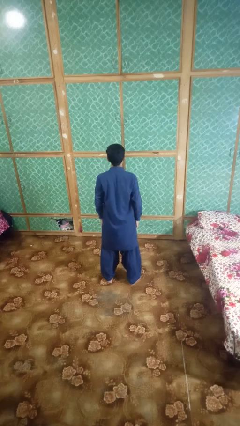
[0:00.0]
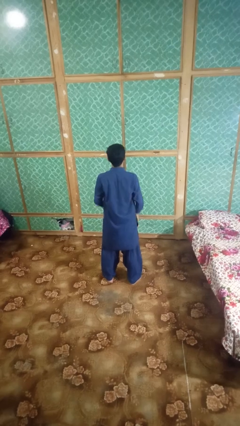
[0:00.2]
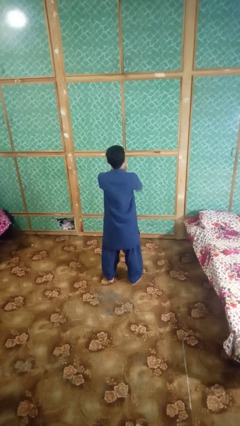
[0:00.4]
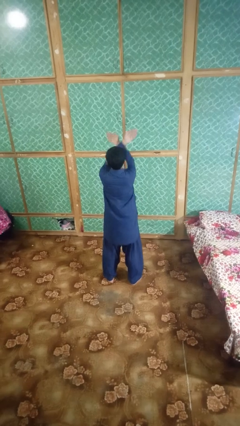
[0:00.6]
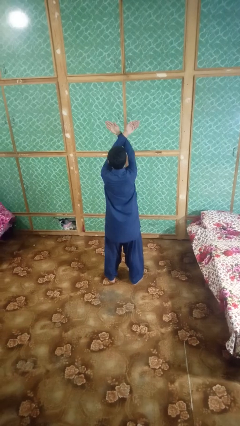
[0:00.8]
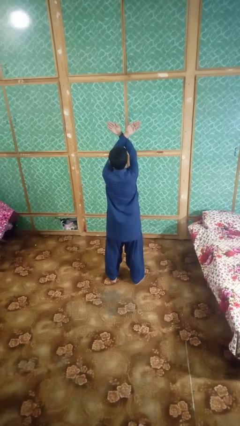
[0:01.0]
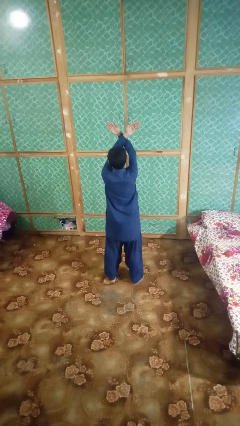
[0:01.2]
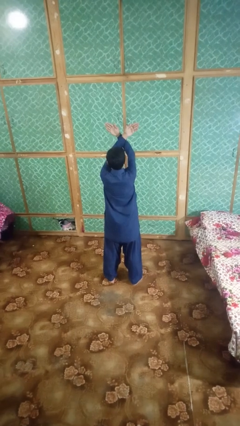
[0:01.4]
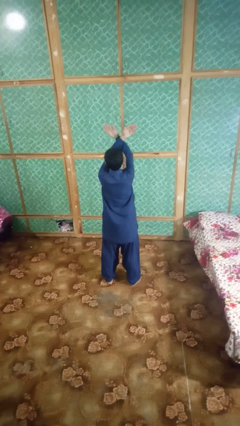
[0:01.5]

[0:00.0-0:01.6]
person gestures arms x

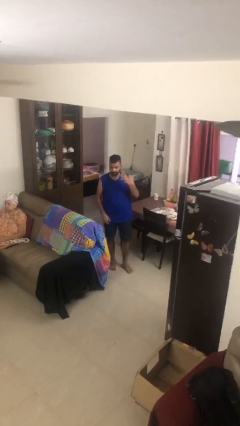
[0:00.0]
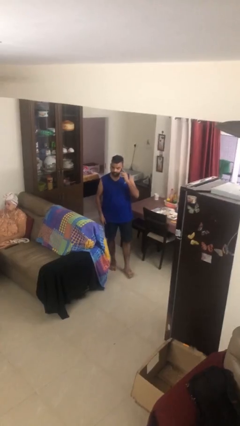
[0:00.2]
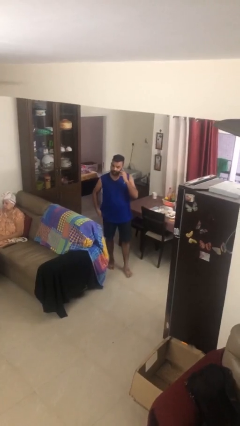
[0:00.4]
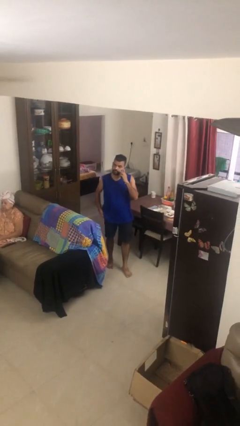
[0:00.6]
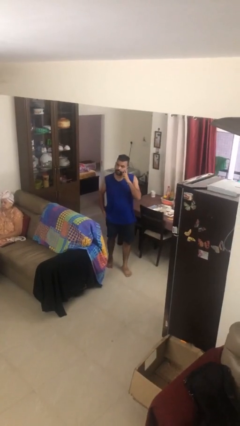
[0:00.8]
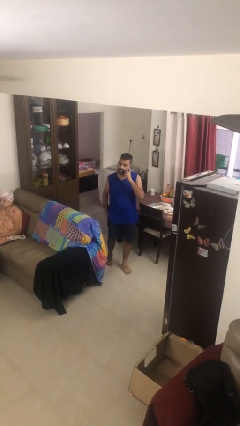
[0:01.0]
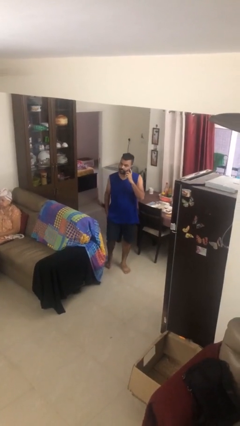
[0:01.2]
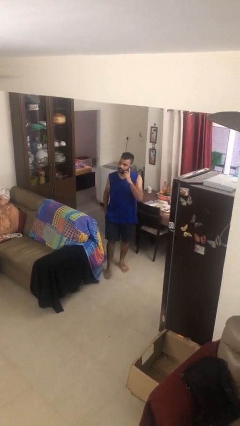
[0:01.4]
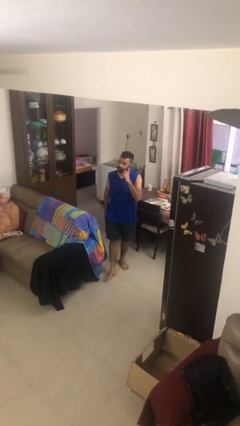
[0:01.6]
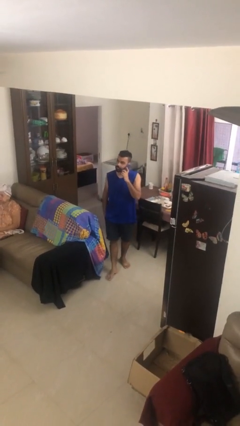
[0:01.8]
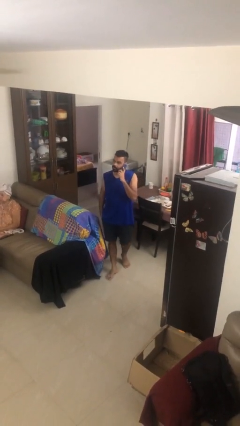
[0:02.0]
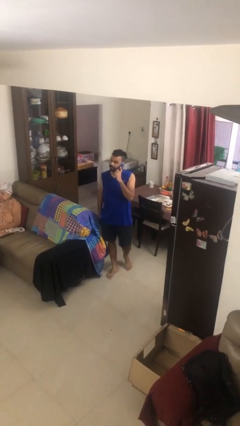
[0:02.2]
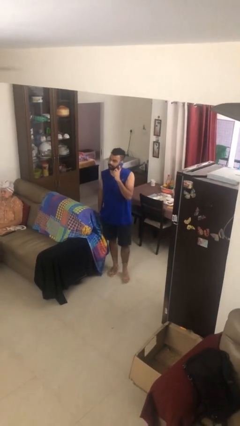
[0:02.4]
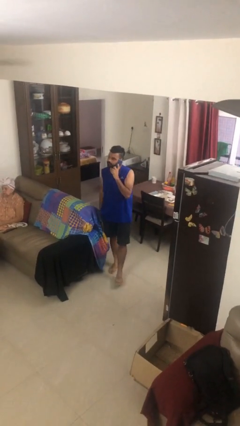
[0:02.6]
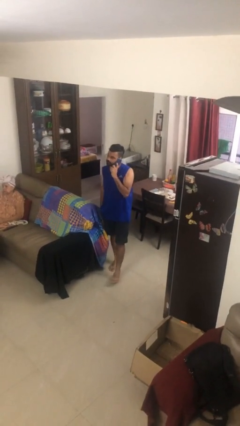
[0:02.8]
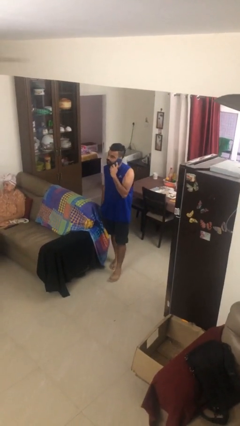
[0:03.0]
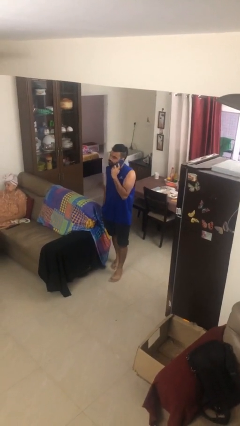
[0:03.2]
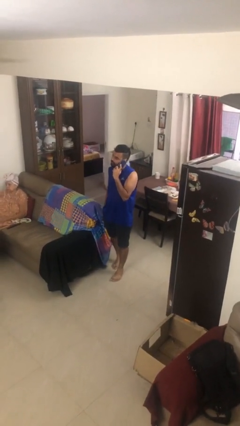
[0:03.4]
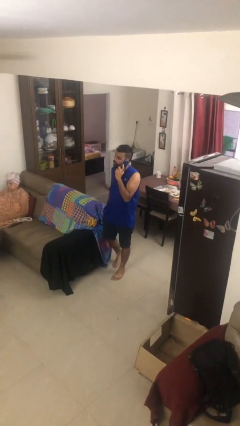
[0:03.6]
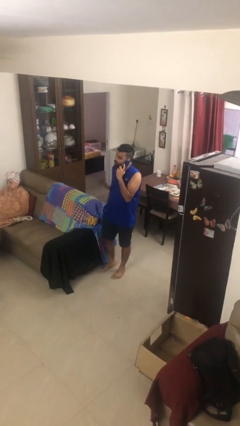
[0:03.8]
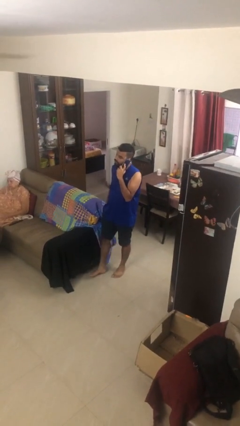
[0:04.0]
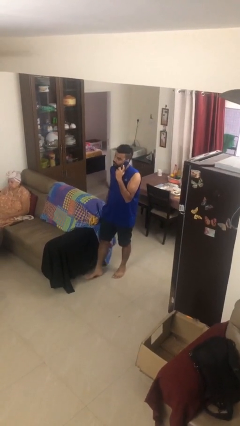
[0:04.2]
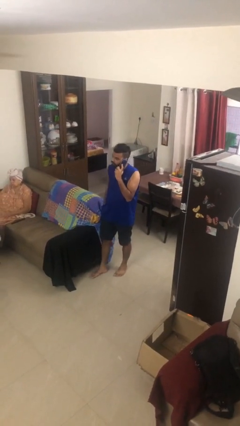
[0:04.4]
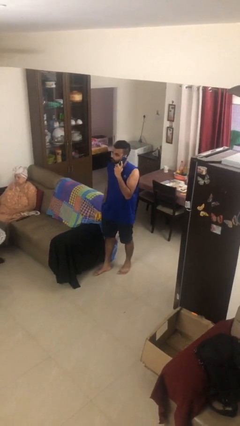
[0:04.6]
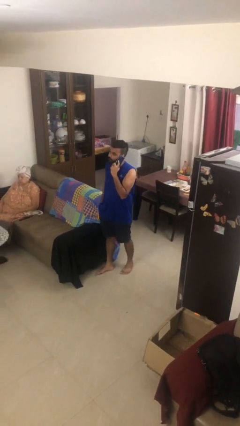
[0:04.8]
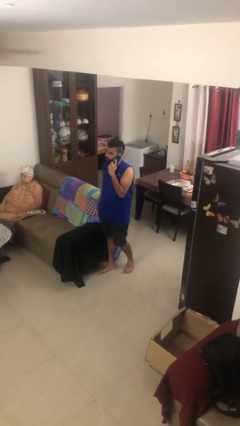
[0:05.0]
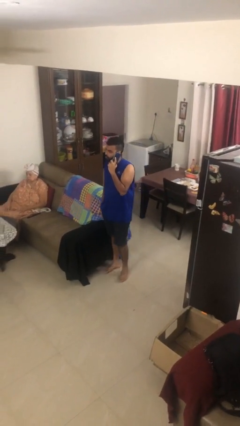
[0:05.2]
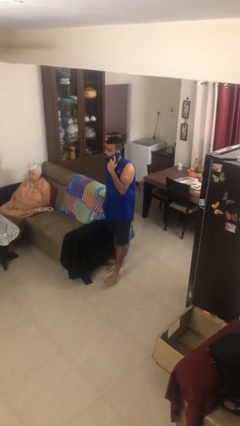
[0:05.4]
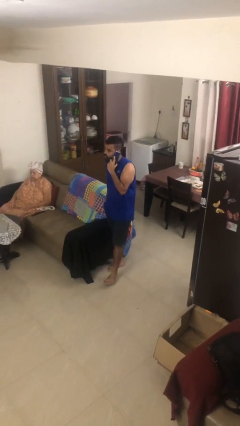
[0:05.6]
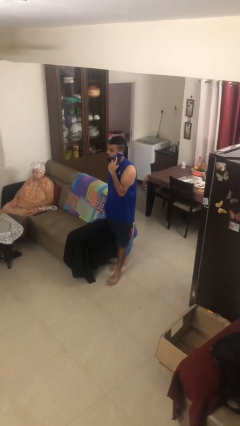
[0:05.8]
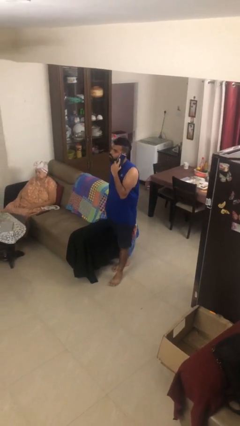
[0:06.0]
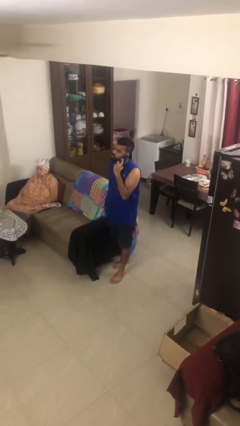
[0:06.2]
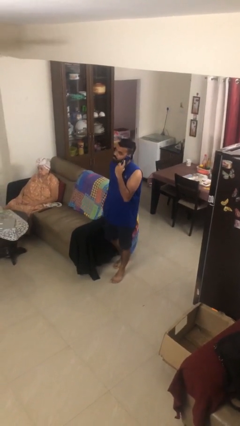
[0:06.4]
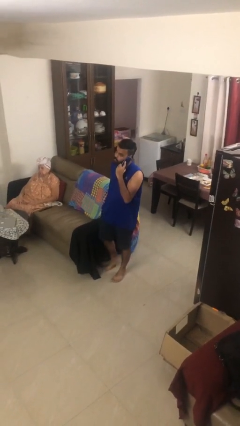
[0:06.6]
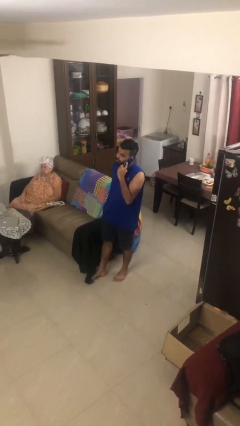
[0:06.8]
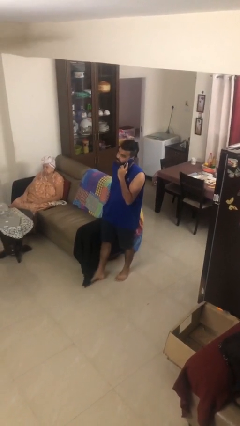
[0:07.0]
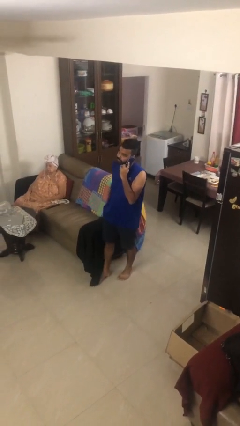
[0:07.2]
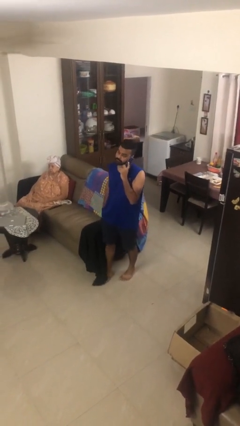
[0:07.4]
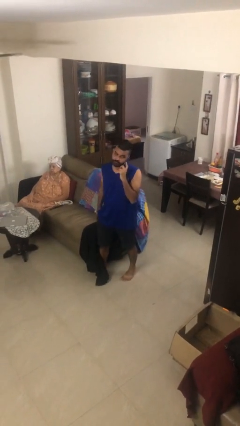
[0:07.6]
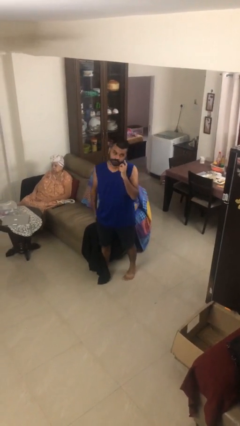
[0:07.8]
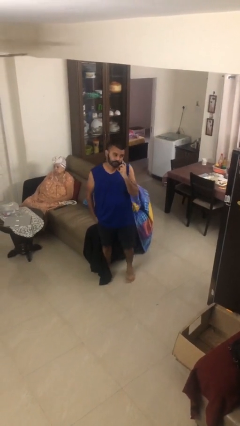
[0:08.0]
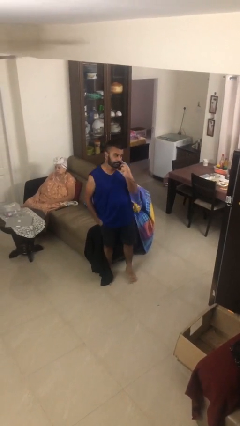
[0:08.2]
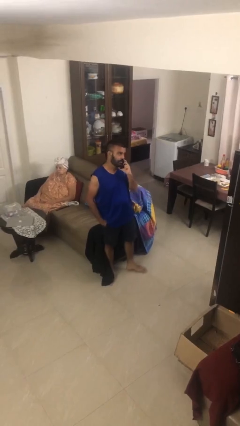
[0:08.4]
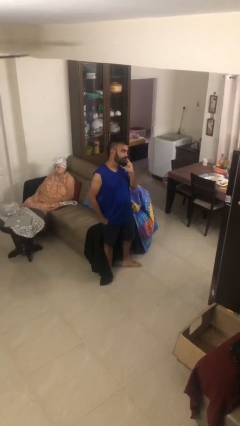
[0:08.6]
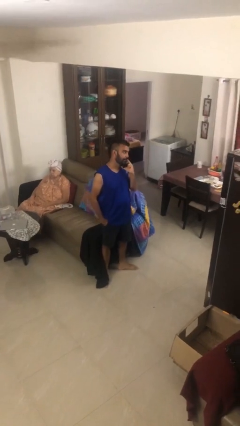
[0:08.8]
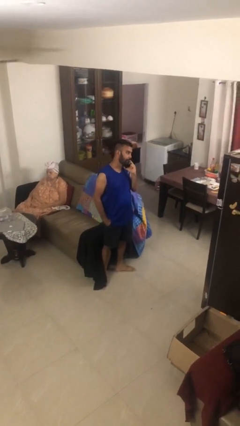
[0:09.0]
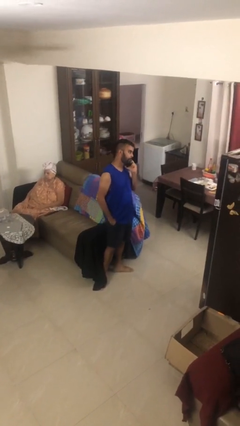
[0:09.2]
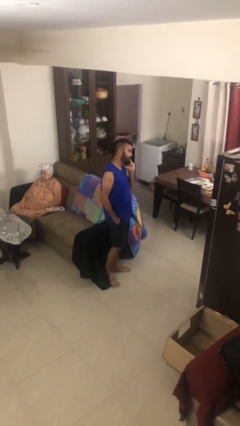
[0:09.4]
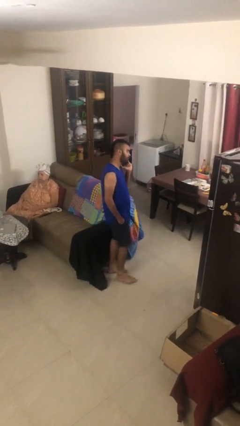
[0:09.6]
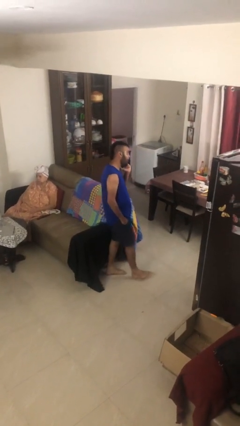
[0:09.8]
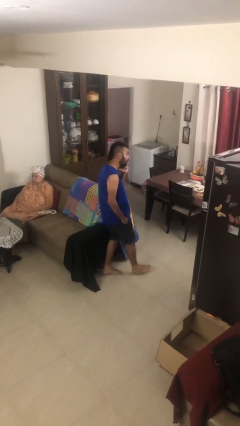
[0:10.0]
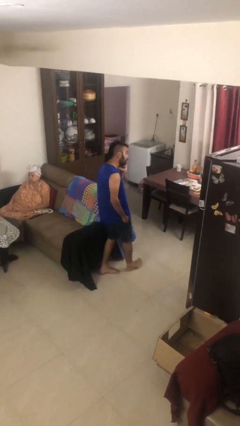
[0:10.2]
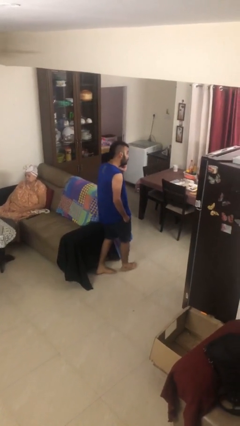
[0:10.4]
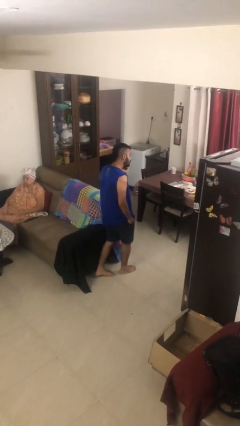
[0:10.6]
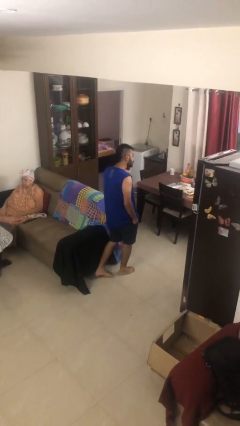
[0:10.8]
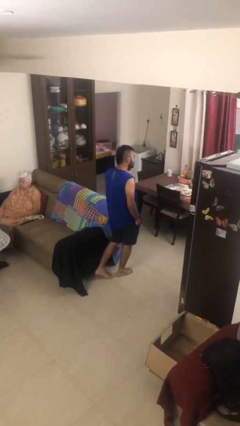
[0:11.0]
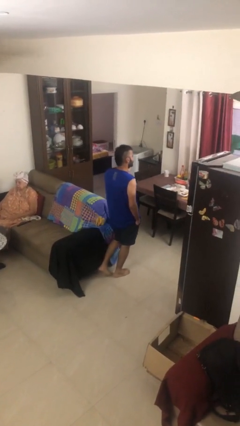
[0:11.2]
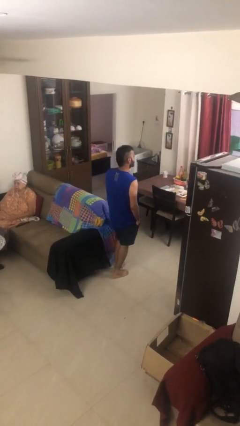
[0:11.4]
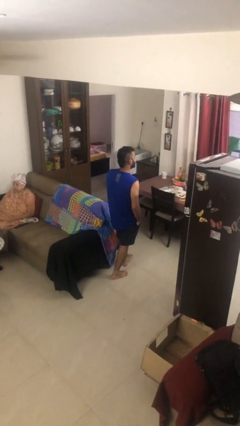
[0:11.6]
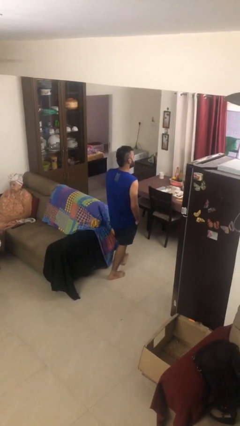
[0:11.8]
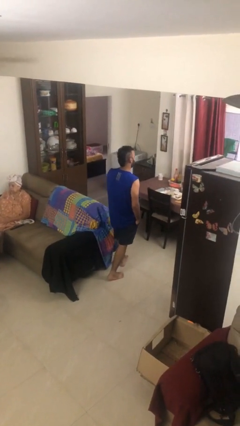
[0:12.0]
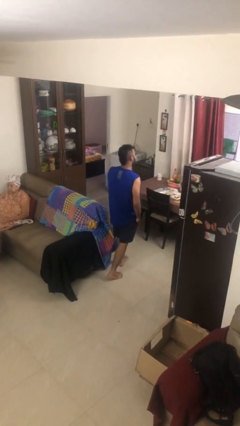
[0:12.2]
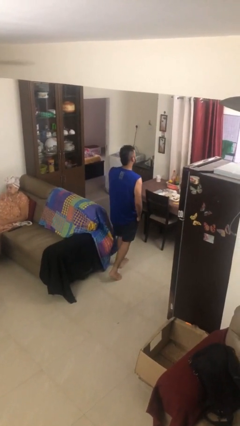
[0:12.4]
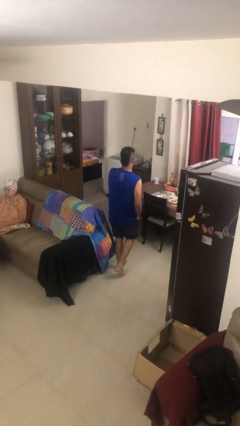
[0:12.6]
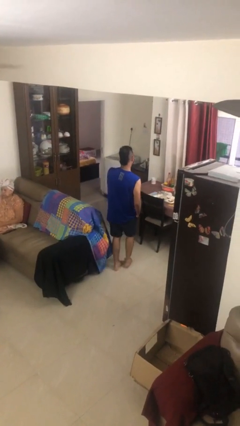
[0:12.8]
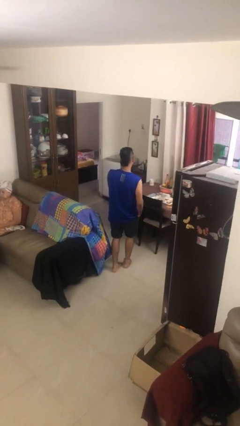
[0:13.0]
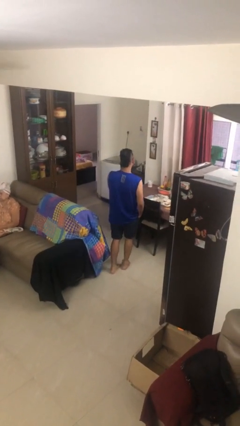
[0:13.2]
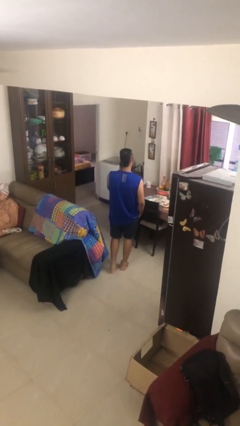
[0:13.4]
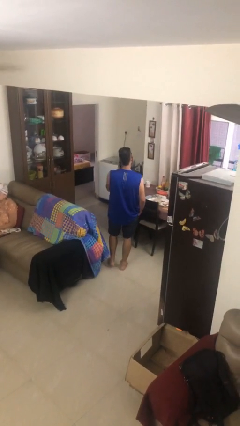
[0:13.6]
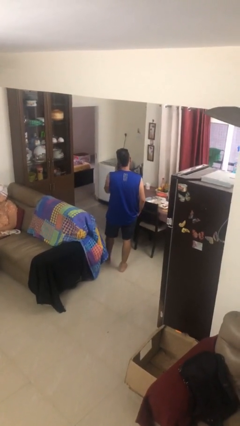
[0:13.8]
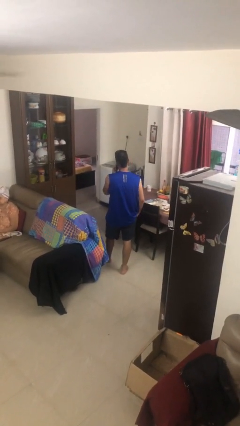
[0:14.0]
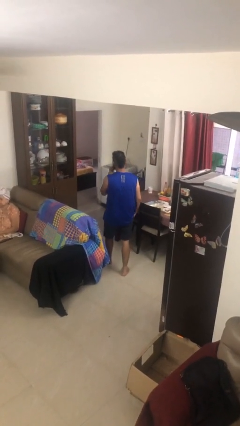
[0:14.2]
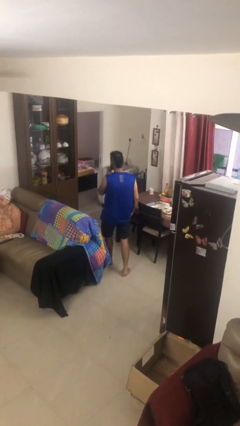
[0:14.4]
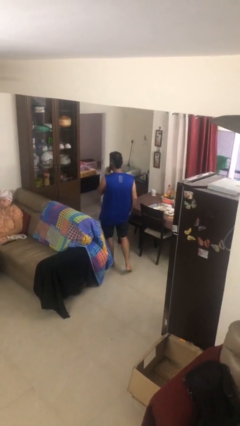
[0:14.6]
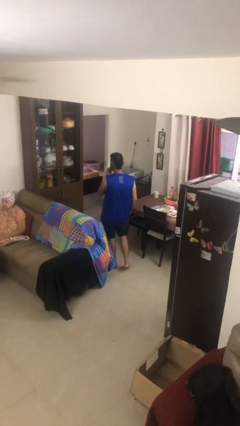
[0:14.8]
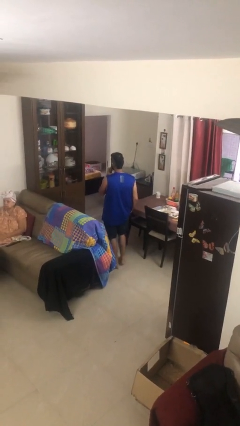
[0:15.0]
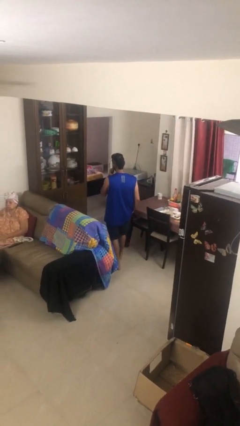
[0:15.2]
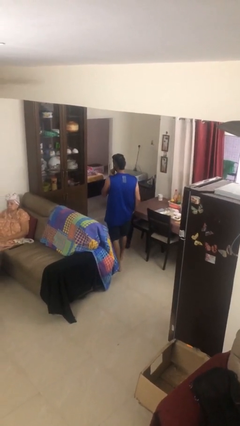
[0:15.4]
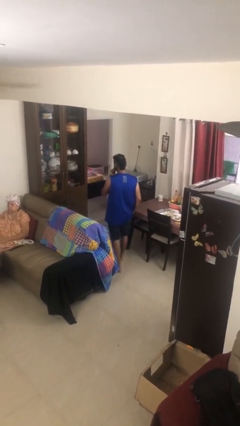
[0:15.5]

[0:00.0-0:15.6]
person talks on phone

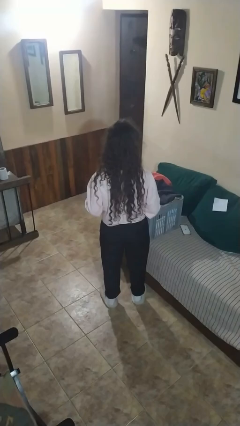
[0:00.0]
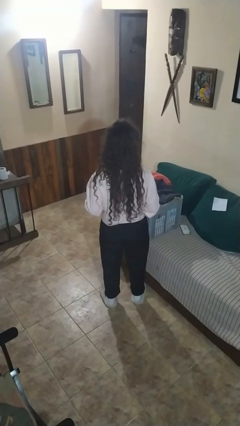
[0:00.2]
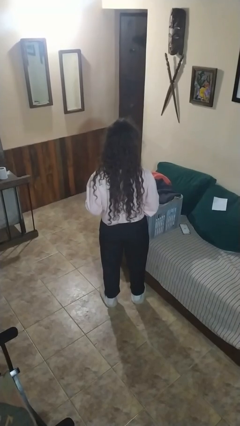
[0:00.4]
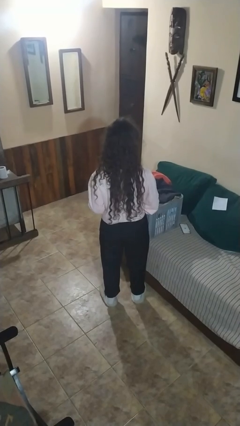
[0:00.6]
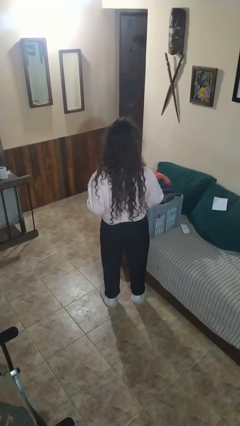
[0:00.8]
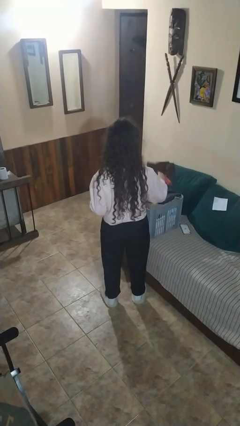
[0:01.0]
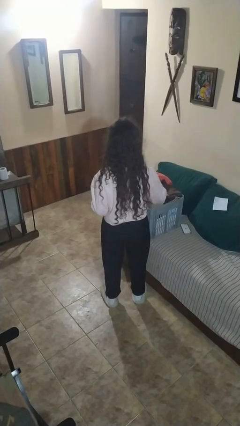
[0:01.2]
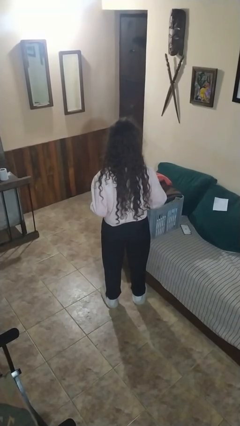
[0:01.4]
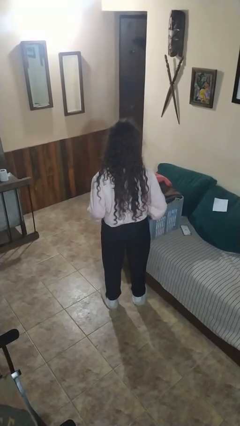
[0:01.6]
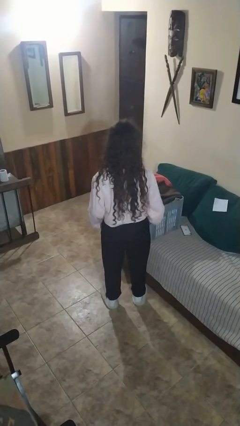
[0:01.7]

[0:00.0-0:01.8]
person puts object into basket
